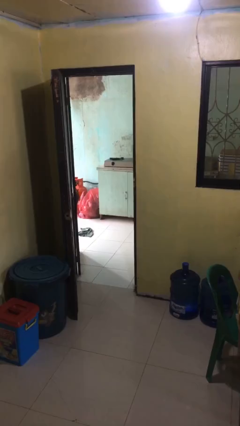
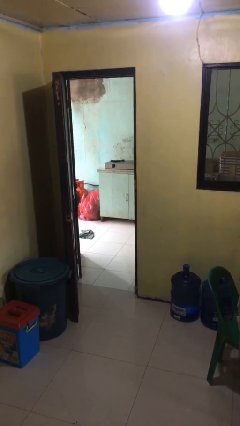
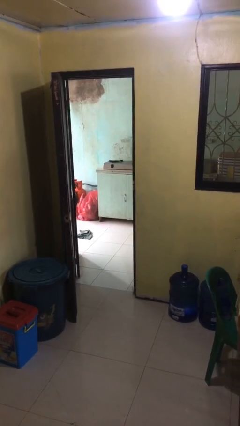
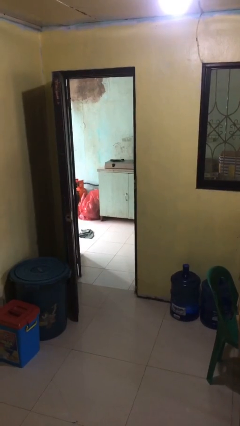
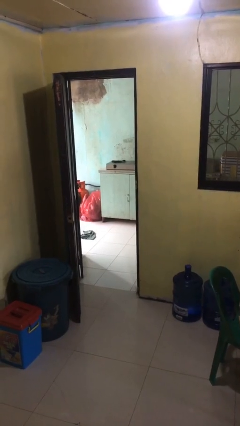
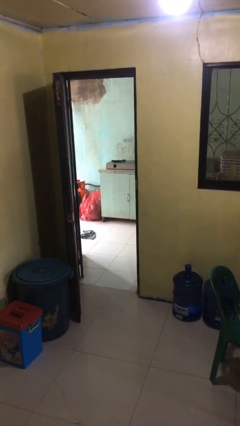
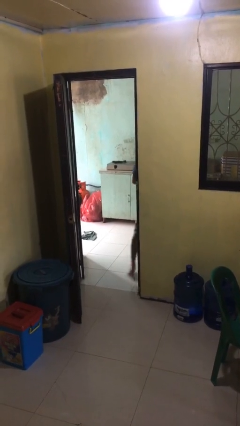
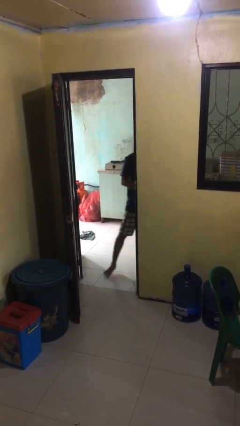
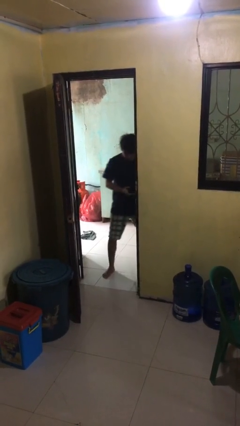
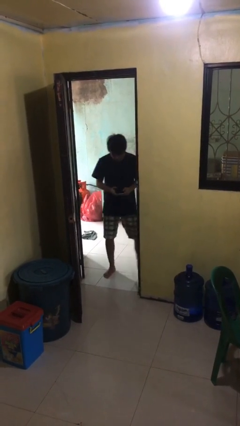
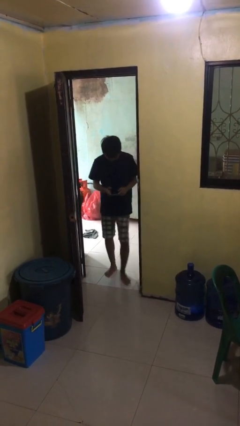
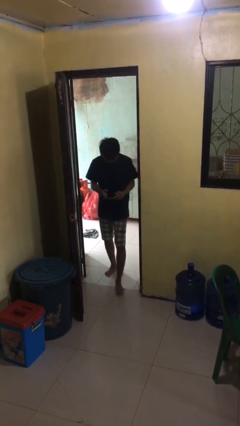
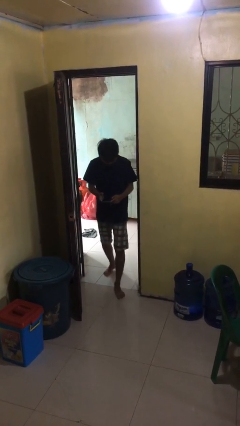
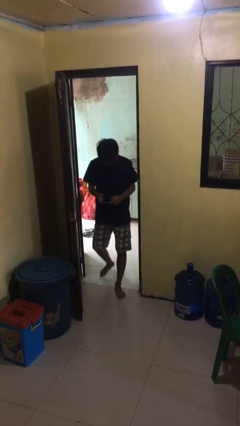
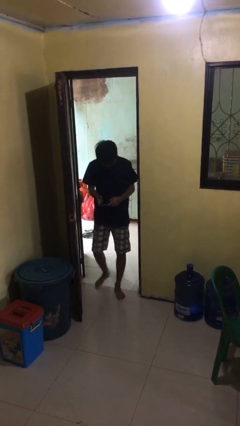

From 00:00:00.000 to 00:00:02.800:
person enters scene through structure

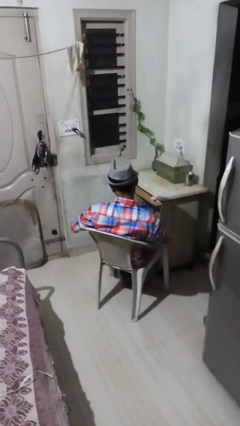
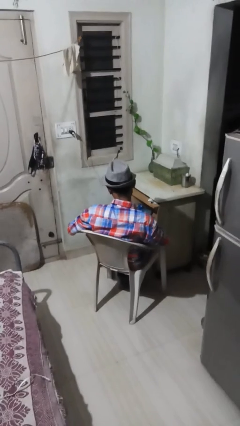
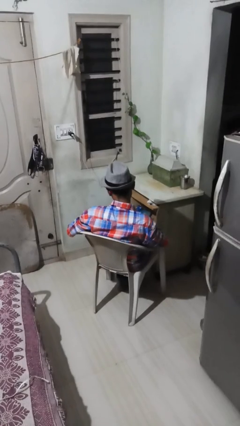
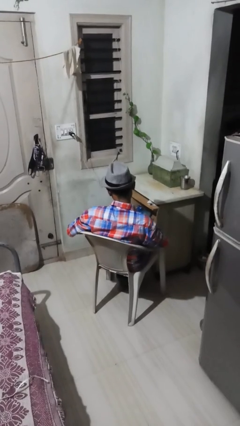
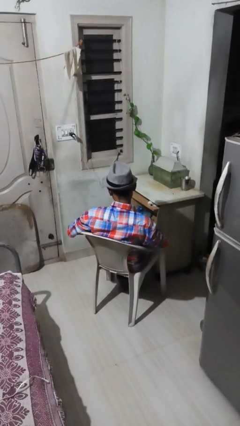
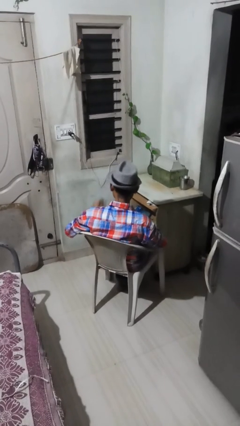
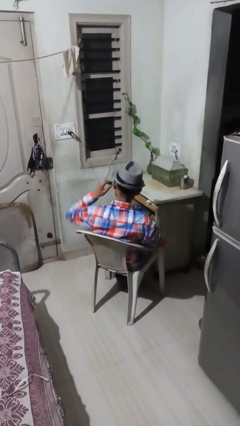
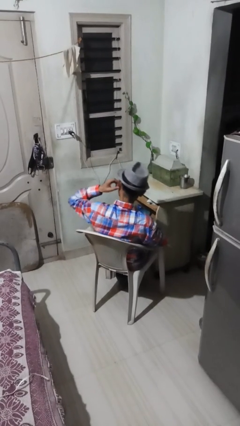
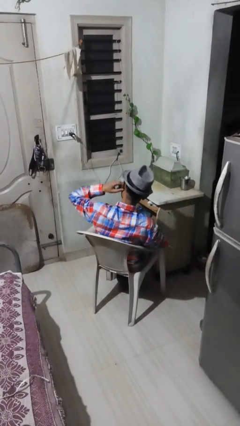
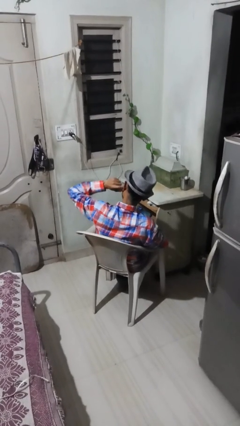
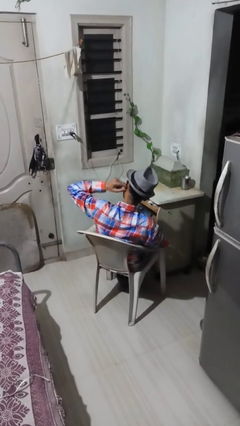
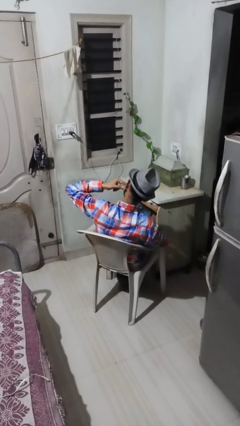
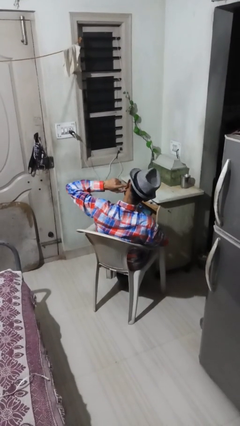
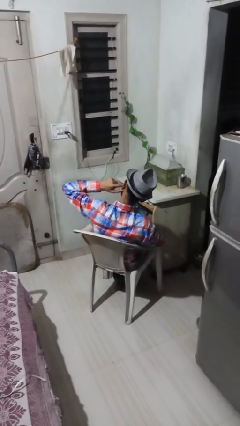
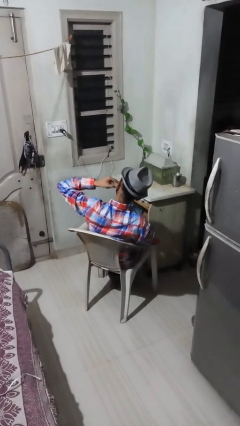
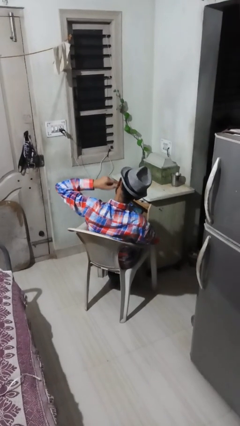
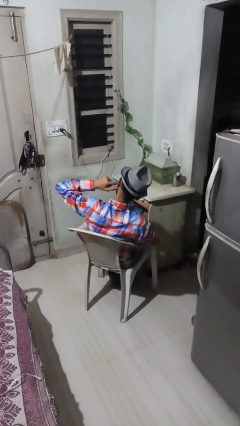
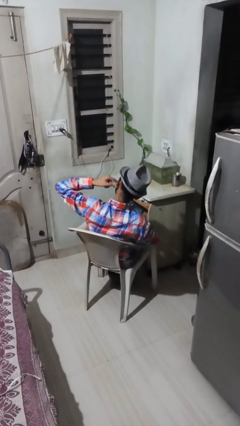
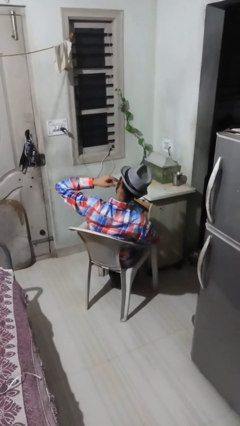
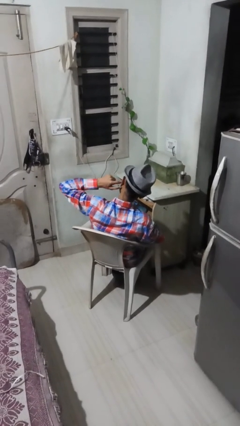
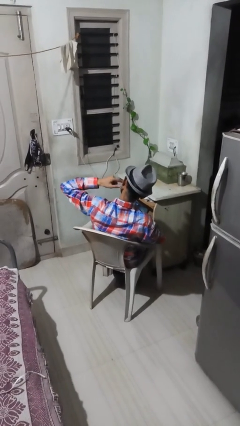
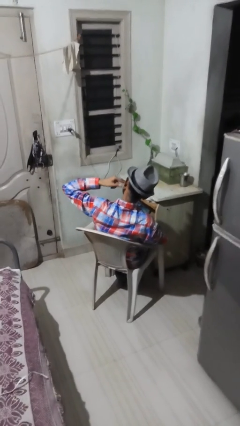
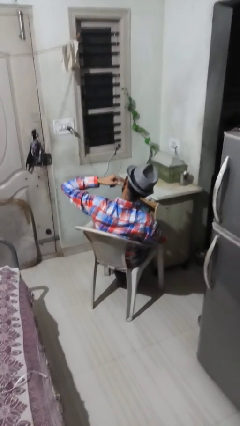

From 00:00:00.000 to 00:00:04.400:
person puts fingers in ear

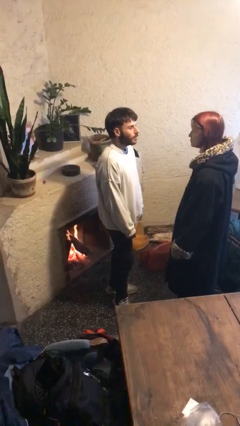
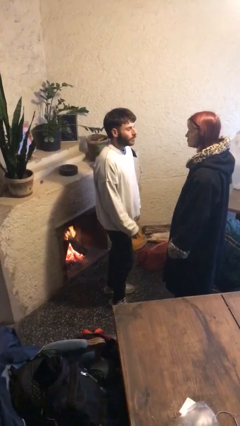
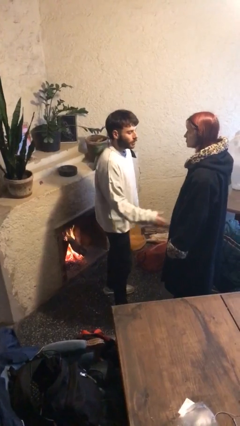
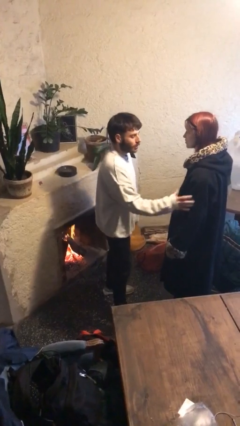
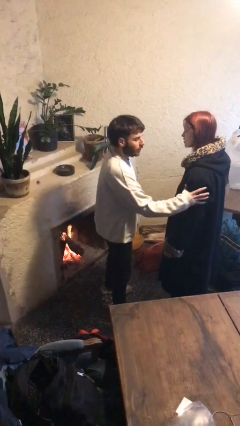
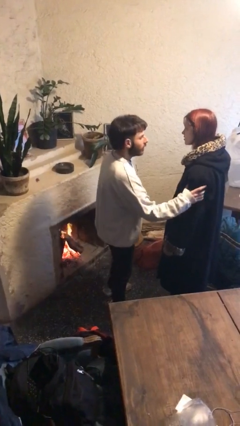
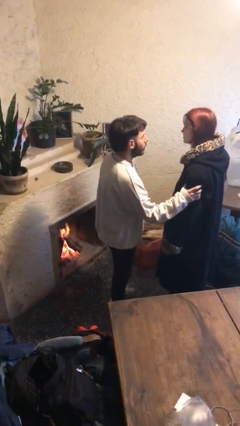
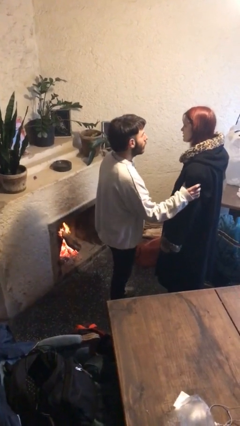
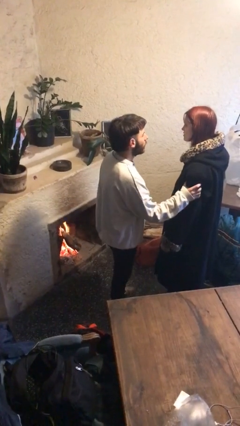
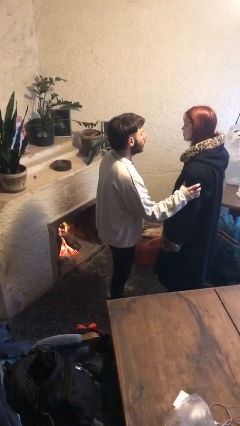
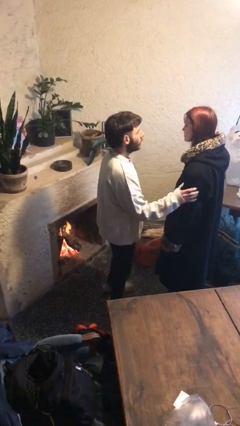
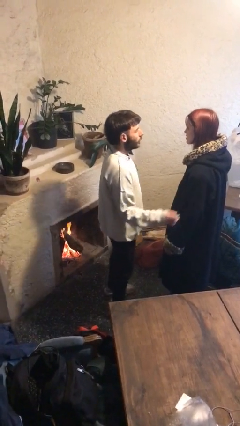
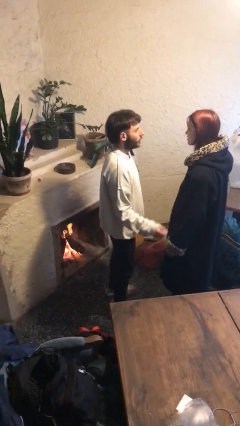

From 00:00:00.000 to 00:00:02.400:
person grabs person by bicep

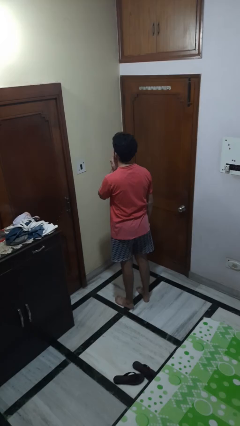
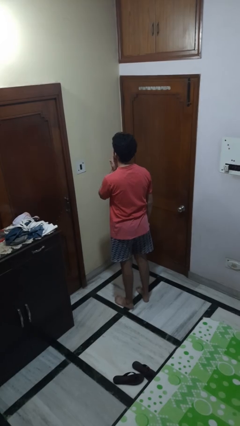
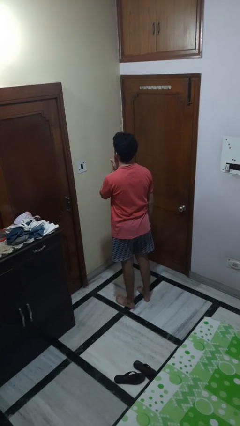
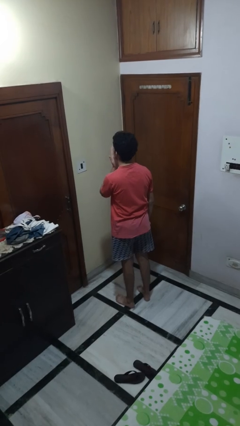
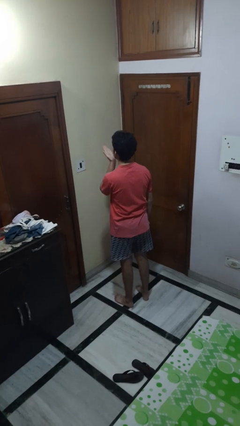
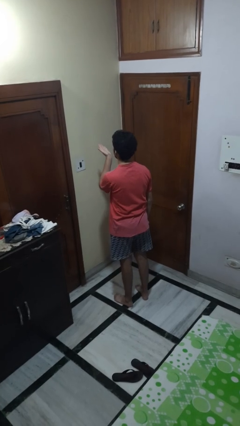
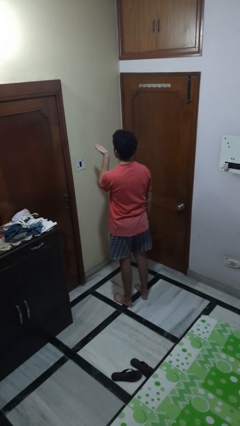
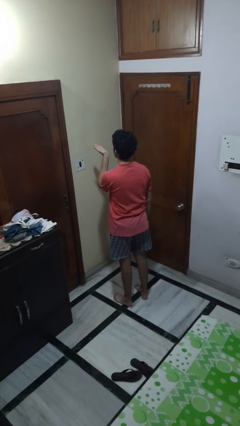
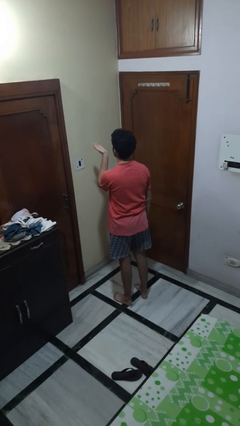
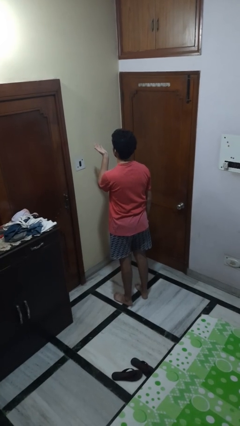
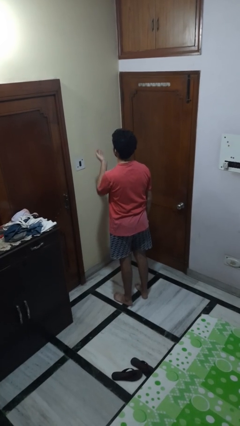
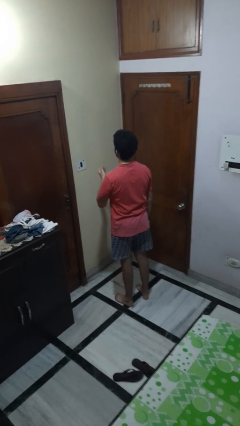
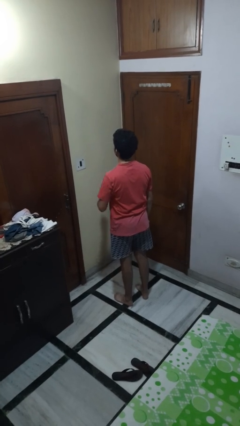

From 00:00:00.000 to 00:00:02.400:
person gestures blow kiss

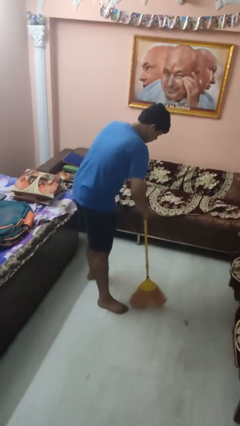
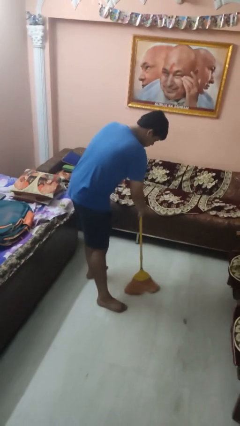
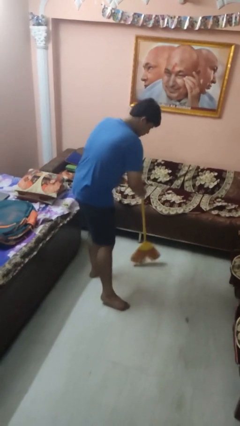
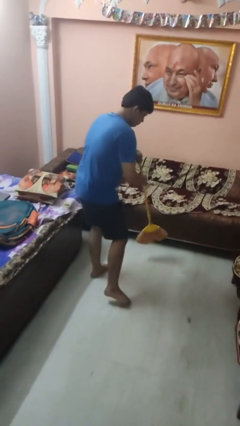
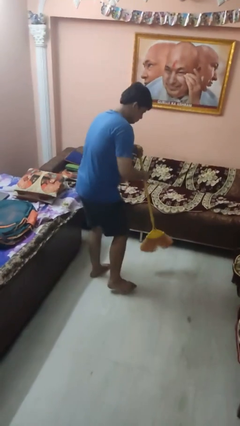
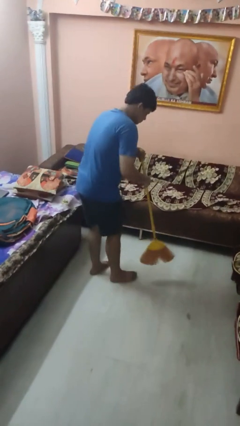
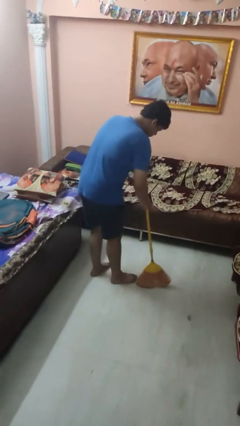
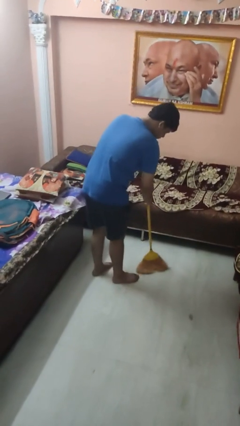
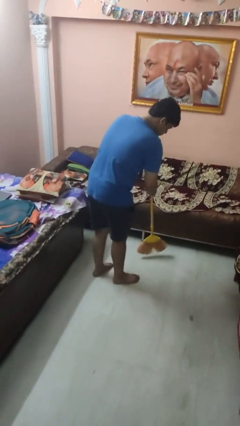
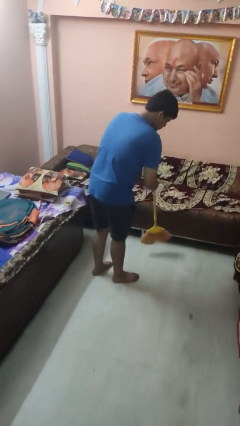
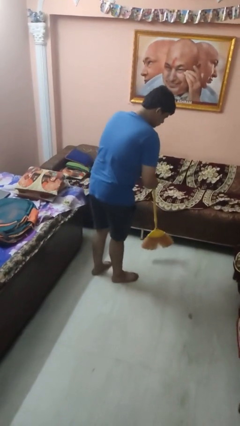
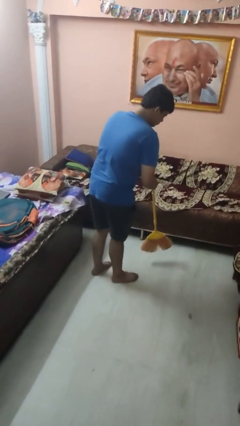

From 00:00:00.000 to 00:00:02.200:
person sweeps floor

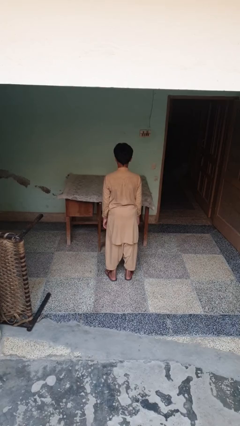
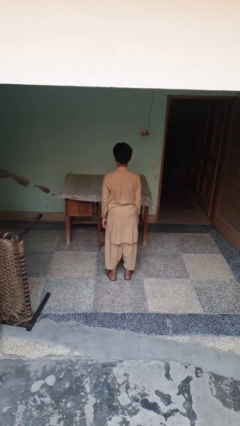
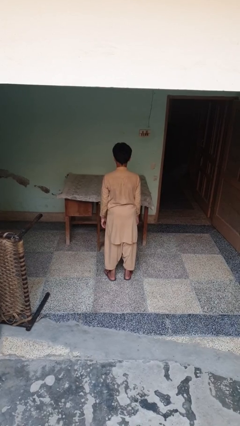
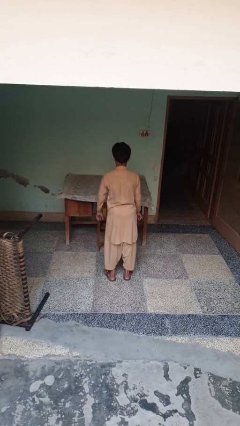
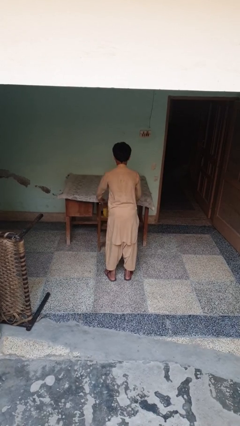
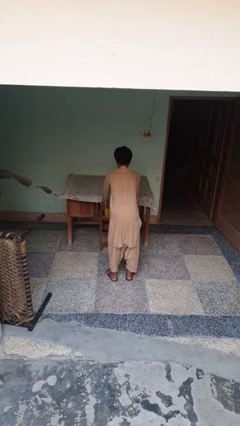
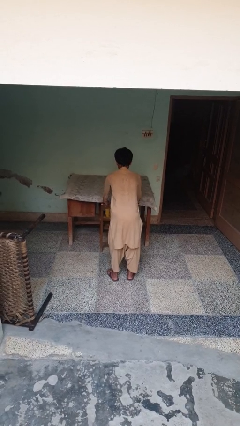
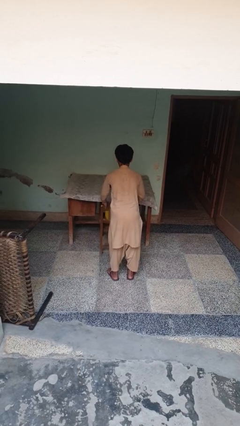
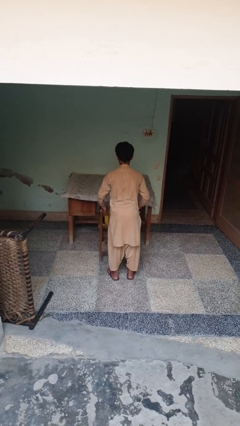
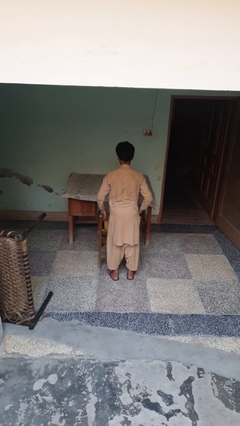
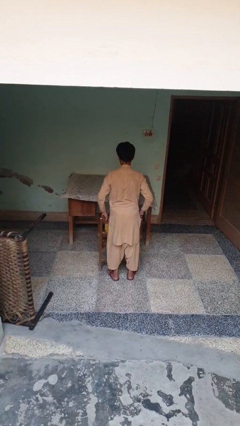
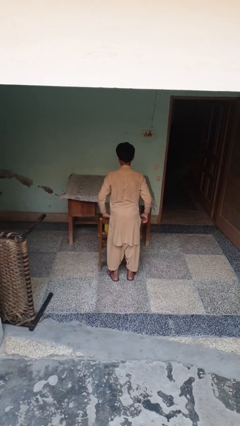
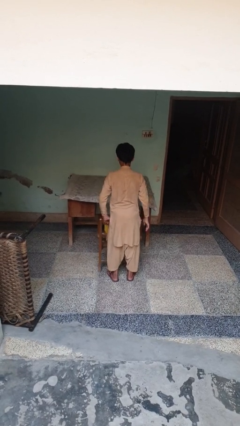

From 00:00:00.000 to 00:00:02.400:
person pulls out chair

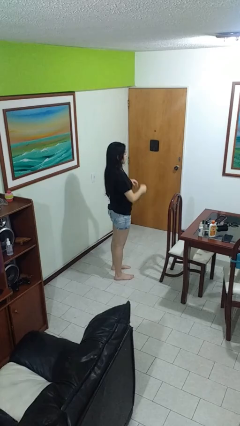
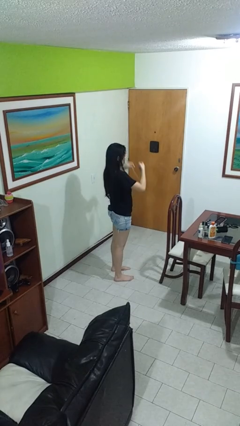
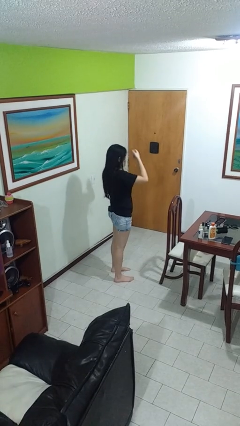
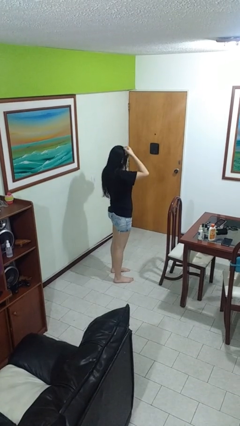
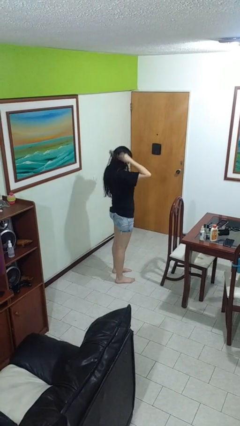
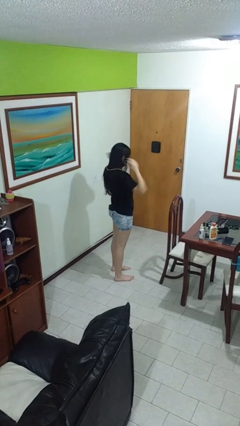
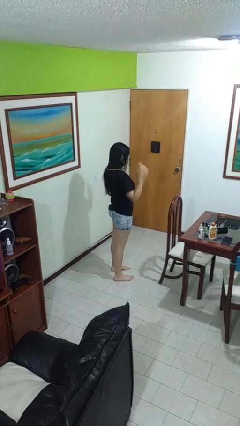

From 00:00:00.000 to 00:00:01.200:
person puts on necklace
